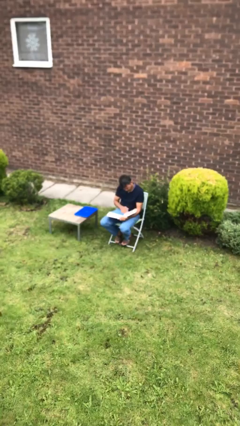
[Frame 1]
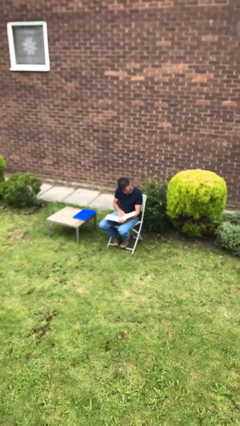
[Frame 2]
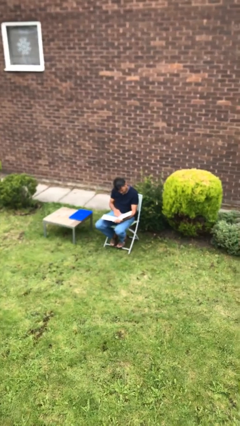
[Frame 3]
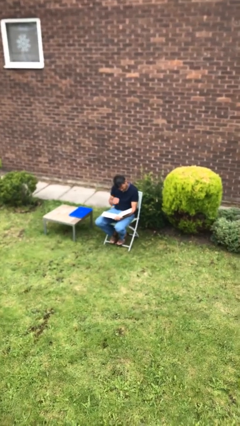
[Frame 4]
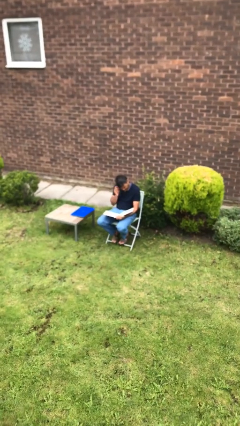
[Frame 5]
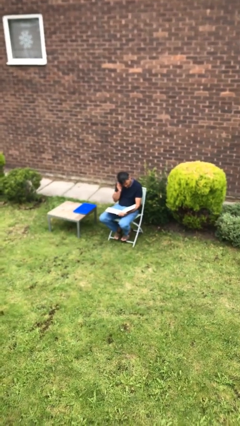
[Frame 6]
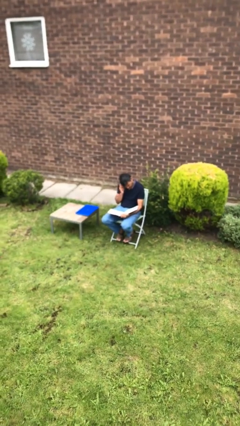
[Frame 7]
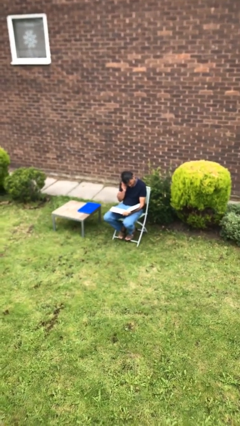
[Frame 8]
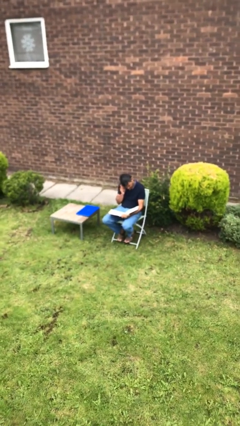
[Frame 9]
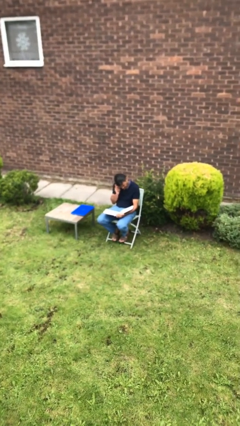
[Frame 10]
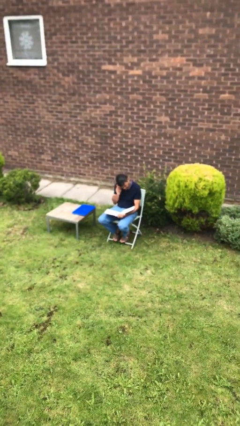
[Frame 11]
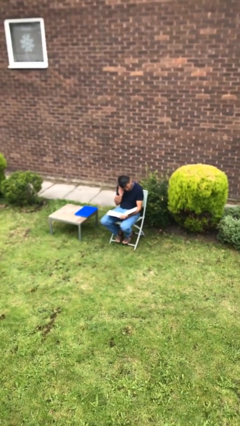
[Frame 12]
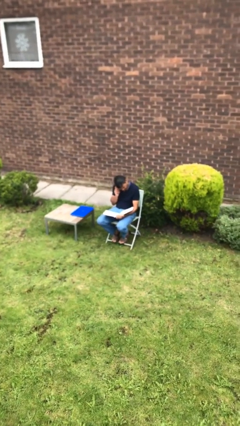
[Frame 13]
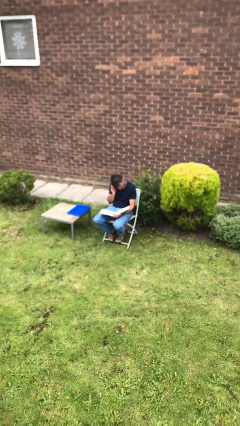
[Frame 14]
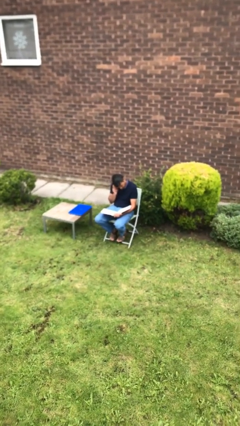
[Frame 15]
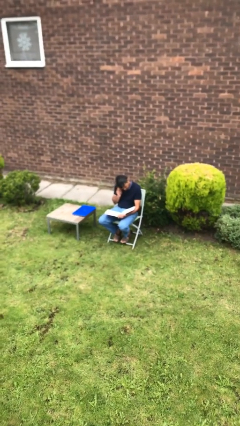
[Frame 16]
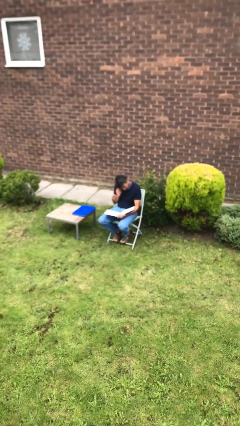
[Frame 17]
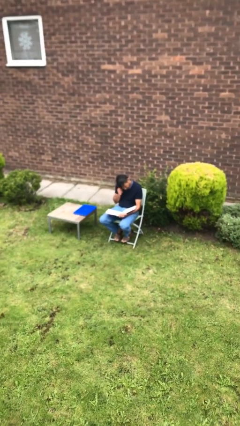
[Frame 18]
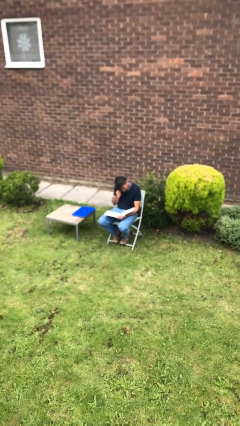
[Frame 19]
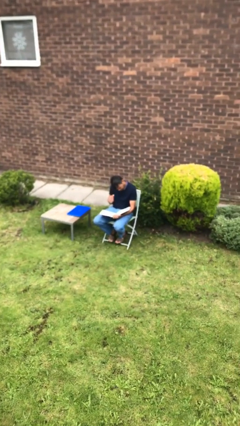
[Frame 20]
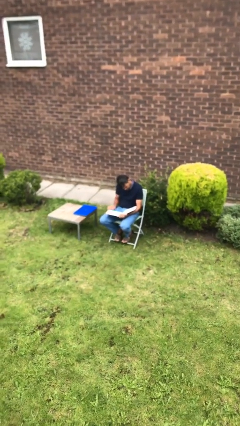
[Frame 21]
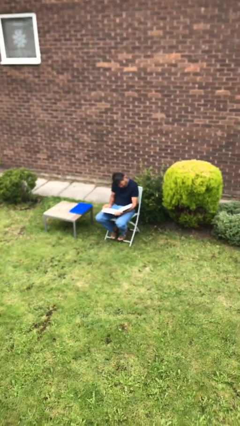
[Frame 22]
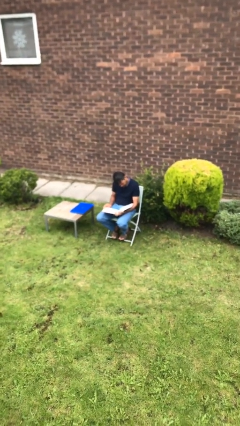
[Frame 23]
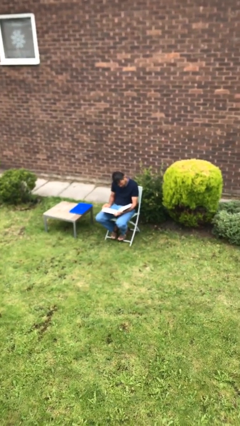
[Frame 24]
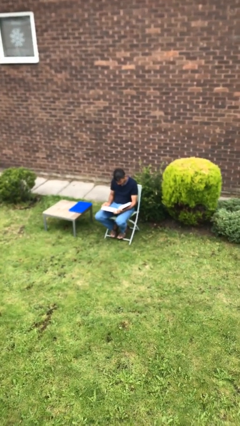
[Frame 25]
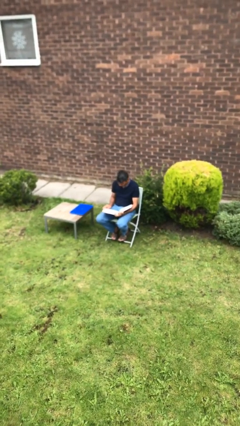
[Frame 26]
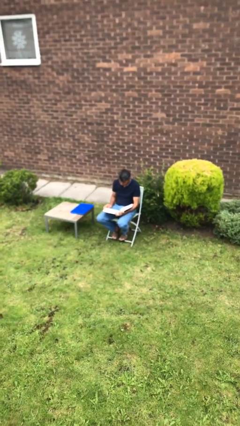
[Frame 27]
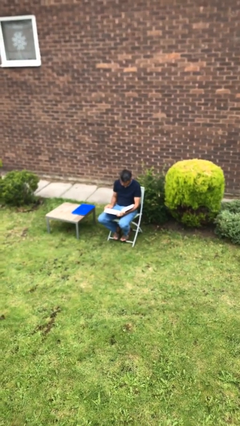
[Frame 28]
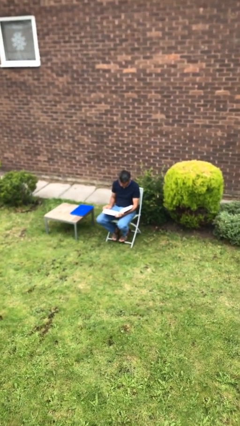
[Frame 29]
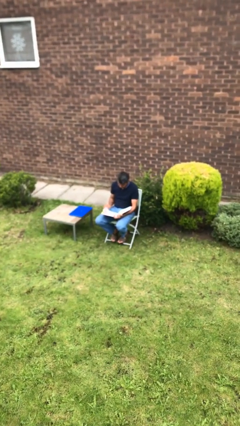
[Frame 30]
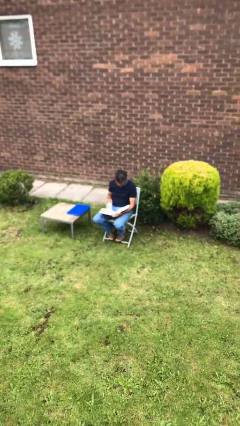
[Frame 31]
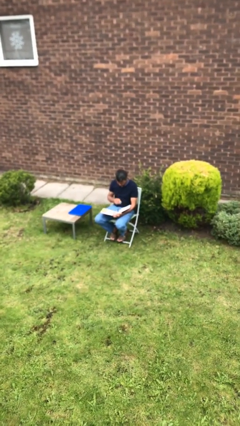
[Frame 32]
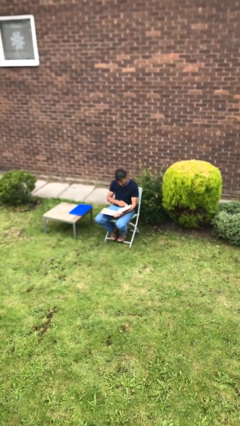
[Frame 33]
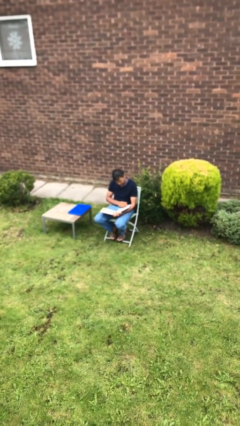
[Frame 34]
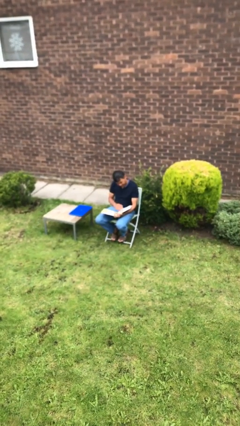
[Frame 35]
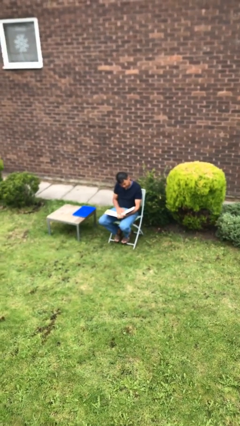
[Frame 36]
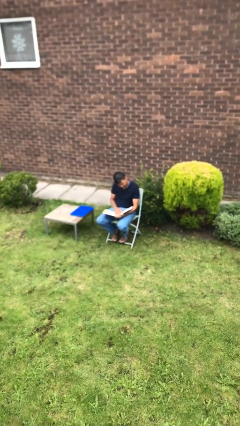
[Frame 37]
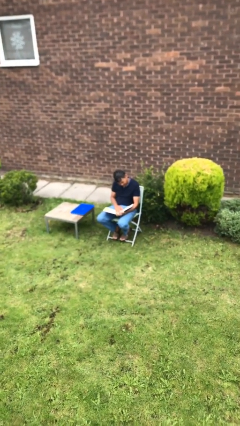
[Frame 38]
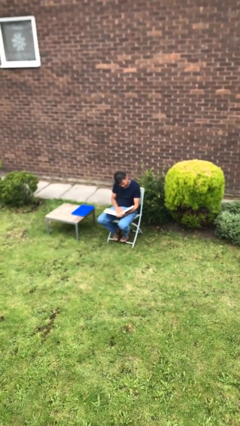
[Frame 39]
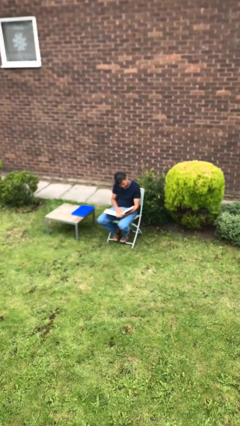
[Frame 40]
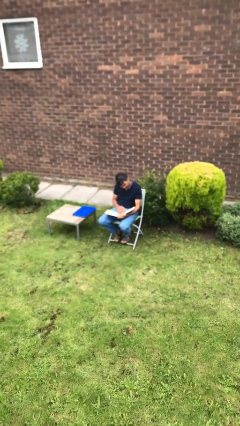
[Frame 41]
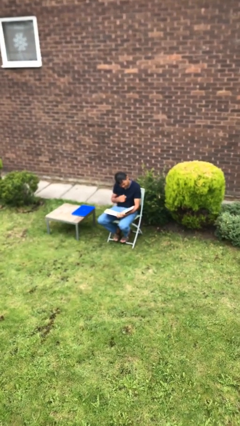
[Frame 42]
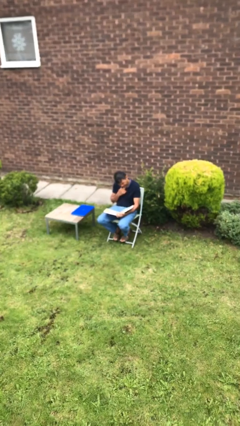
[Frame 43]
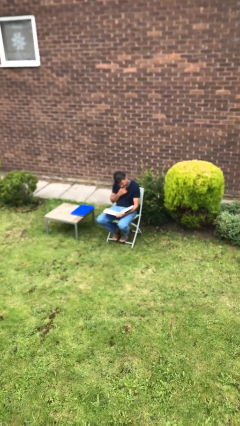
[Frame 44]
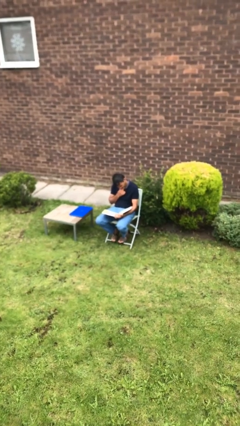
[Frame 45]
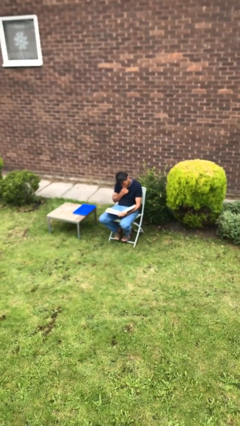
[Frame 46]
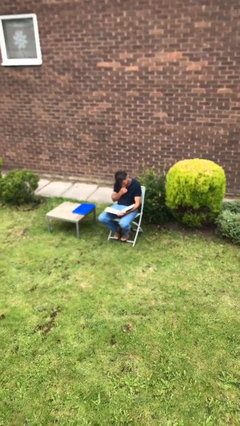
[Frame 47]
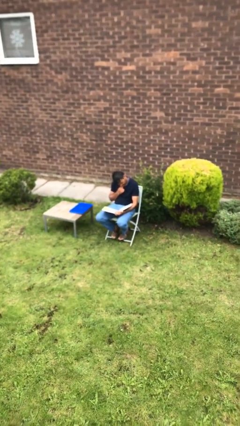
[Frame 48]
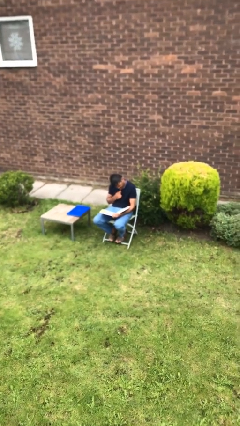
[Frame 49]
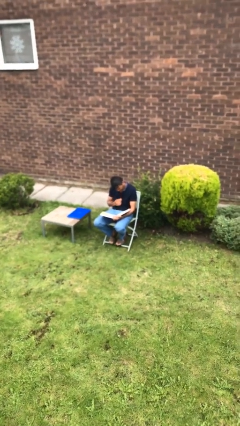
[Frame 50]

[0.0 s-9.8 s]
person reads document

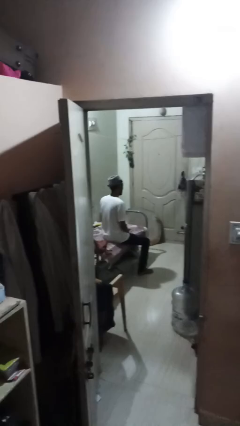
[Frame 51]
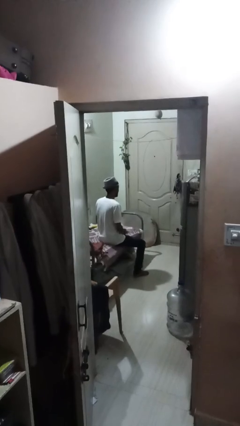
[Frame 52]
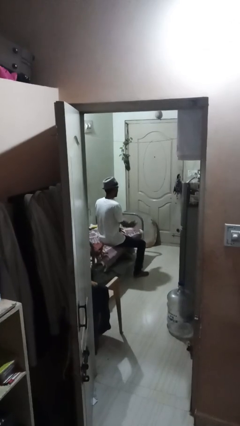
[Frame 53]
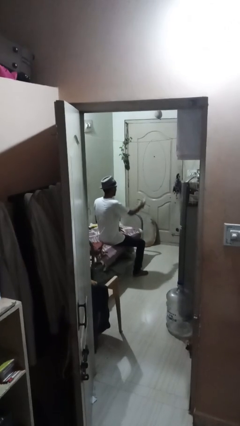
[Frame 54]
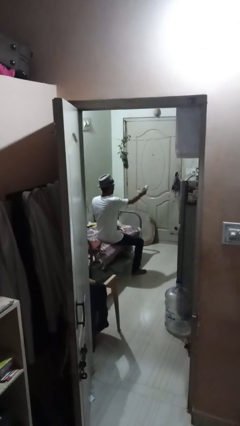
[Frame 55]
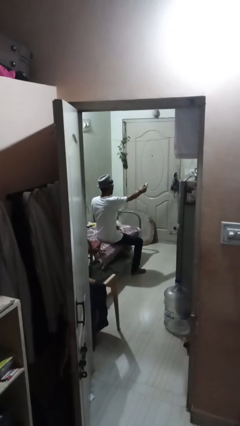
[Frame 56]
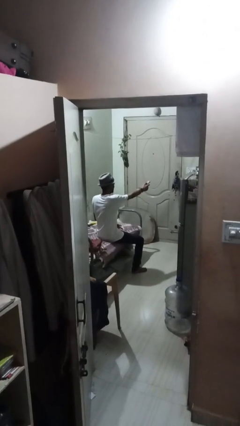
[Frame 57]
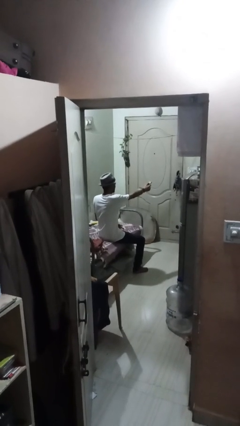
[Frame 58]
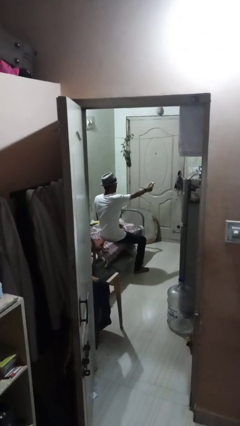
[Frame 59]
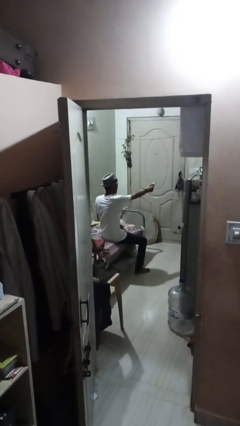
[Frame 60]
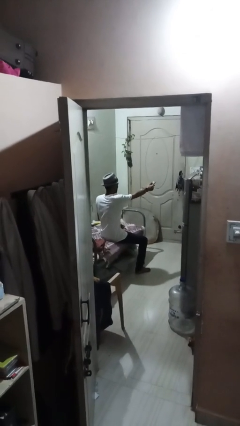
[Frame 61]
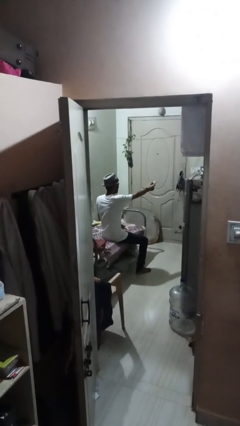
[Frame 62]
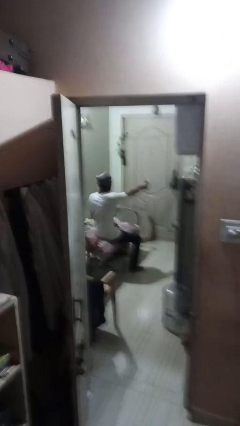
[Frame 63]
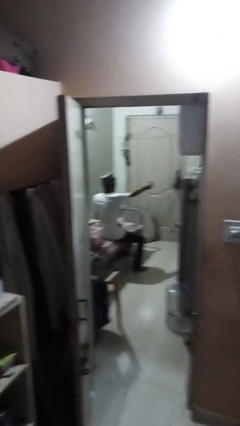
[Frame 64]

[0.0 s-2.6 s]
person uses television remote

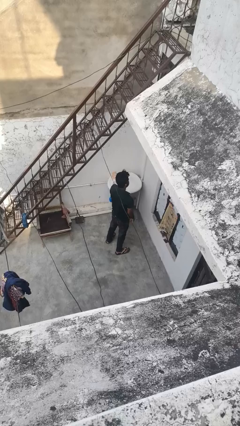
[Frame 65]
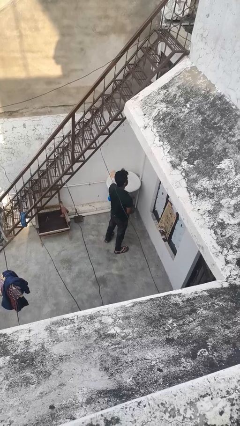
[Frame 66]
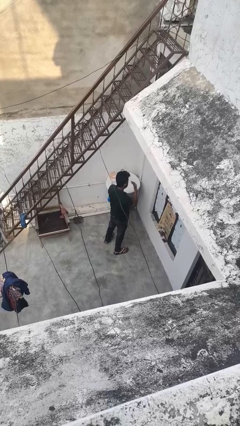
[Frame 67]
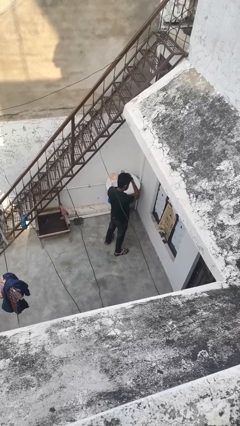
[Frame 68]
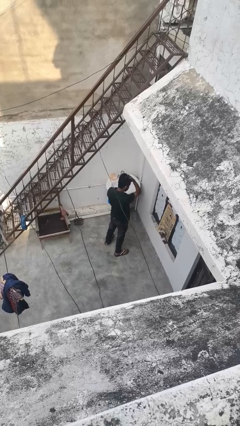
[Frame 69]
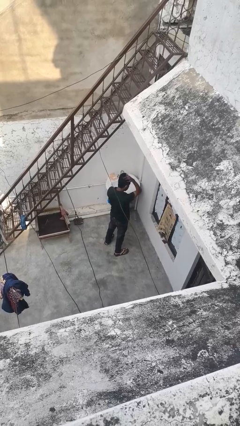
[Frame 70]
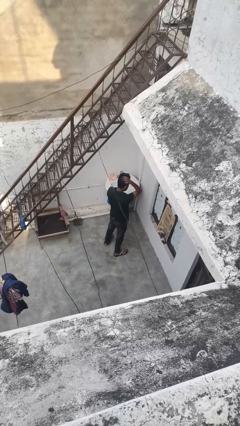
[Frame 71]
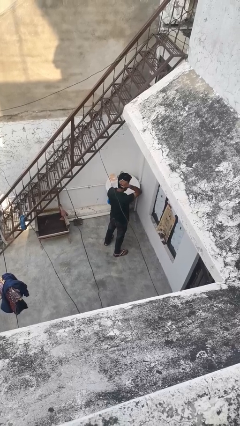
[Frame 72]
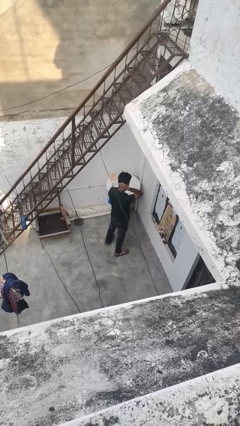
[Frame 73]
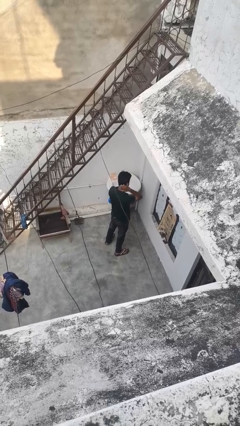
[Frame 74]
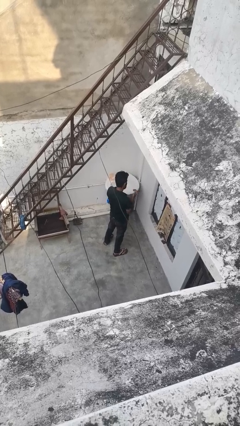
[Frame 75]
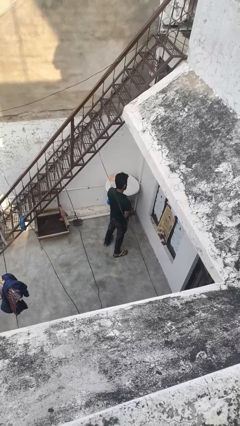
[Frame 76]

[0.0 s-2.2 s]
person strokes hair

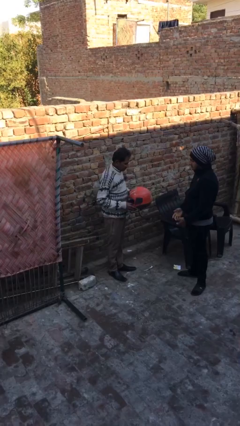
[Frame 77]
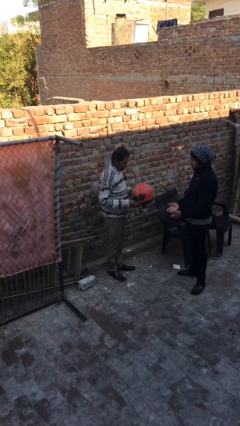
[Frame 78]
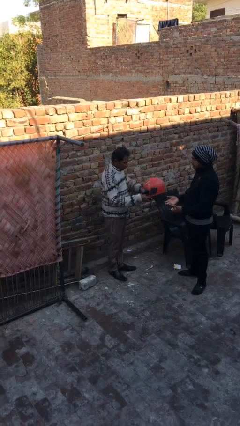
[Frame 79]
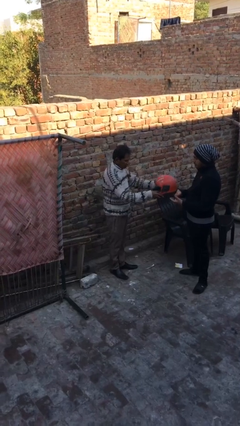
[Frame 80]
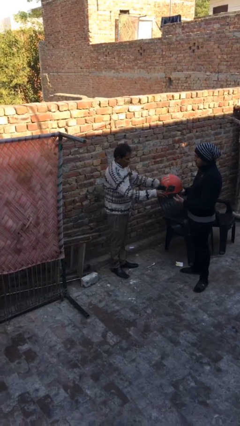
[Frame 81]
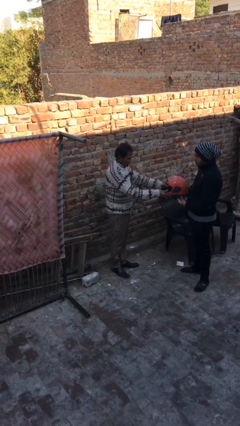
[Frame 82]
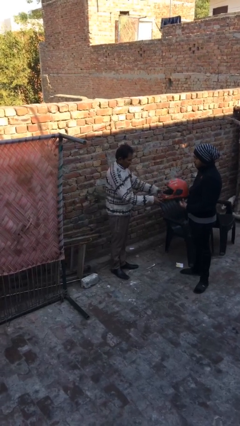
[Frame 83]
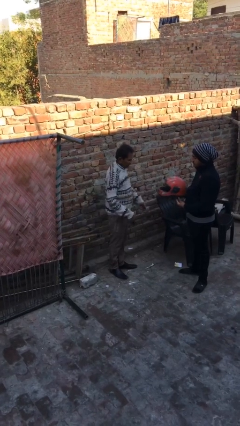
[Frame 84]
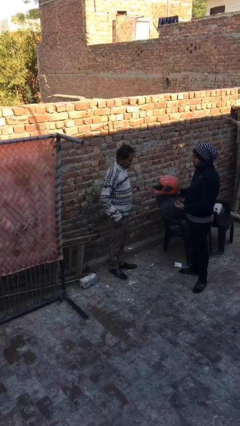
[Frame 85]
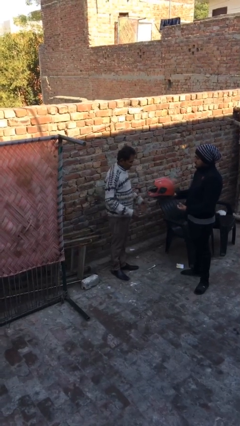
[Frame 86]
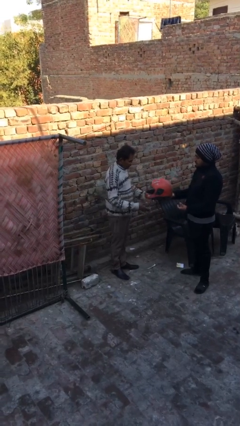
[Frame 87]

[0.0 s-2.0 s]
person transfers object to person

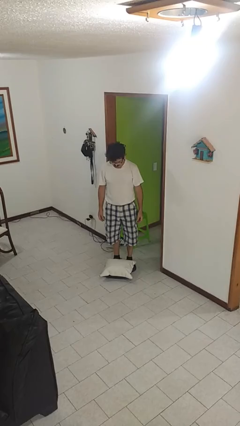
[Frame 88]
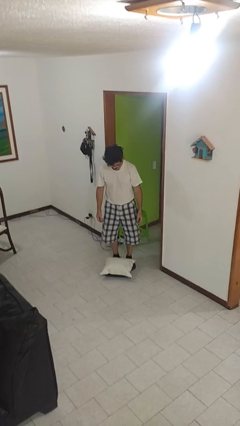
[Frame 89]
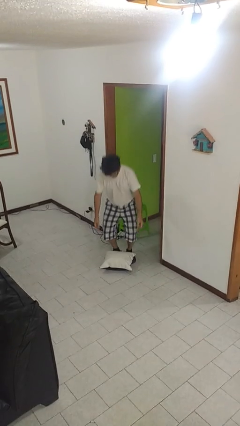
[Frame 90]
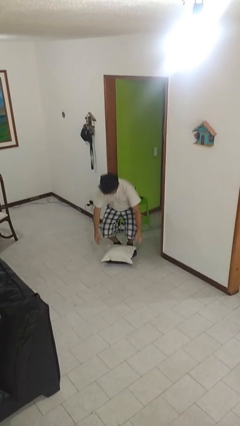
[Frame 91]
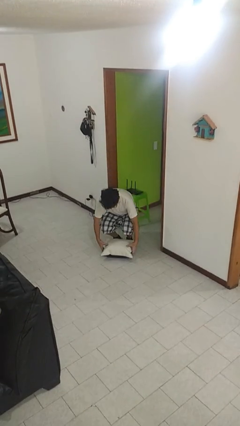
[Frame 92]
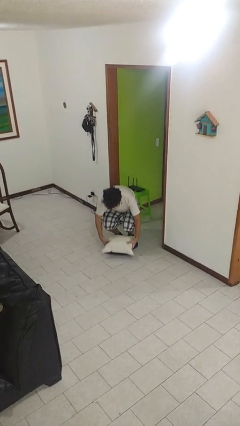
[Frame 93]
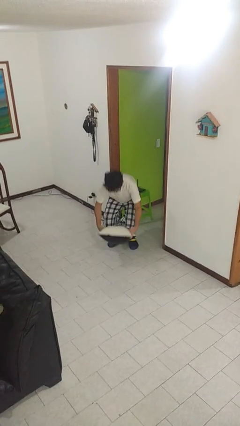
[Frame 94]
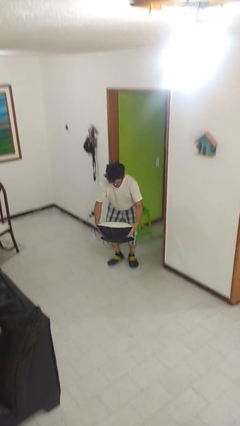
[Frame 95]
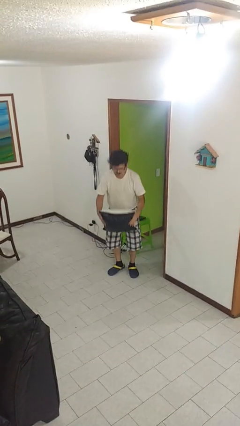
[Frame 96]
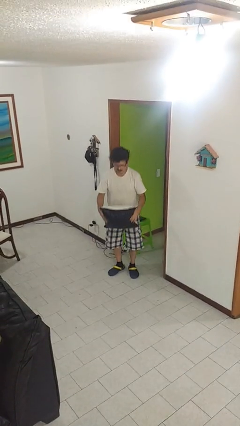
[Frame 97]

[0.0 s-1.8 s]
person picks up object from floor
